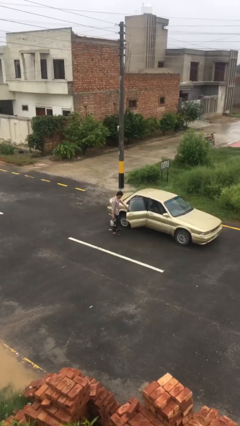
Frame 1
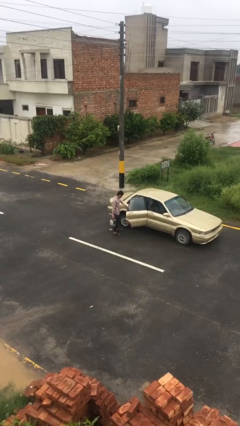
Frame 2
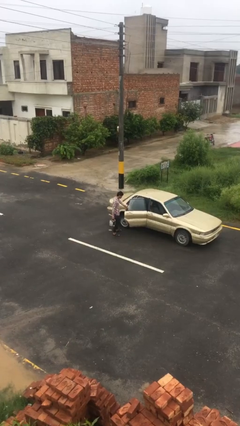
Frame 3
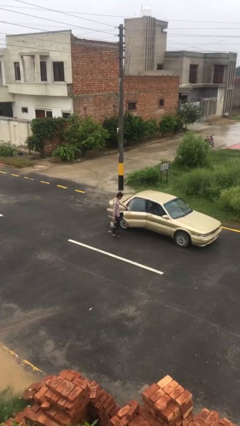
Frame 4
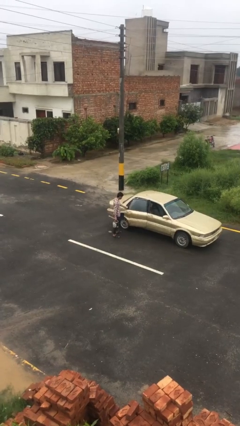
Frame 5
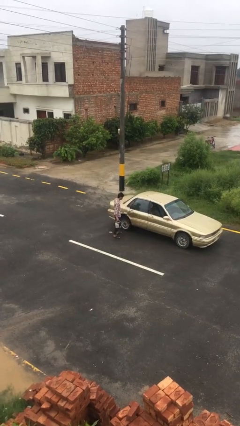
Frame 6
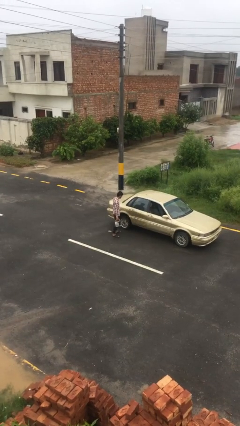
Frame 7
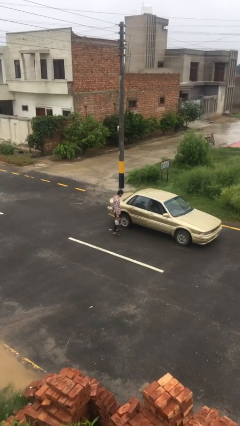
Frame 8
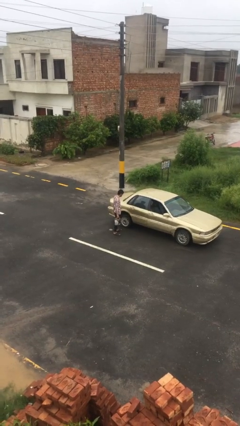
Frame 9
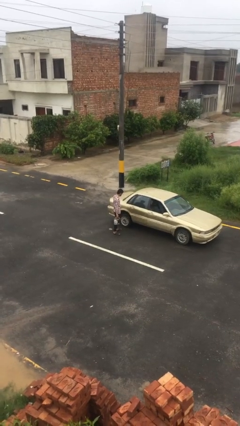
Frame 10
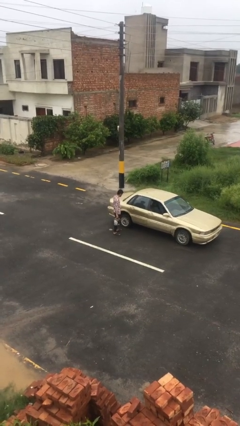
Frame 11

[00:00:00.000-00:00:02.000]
person closes car door

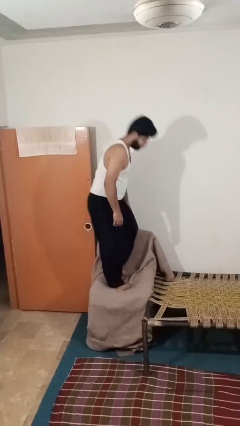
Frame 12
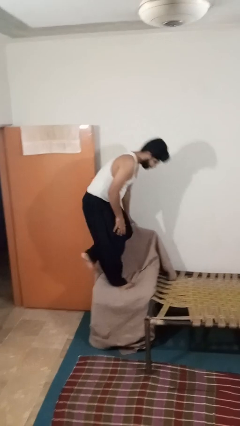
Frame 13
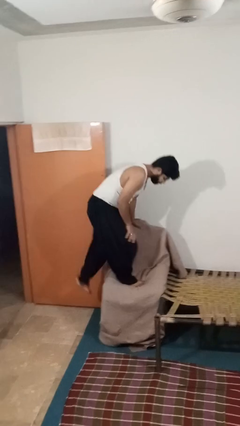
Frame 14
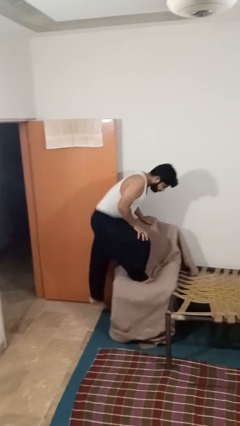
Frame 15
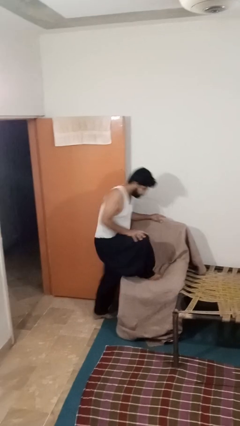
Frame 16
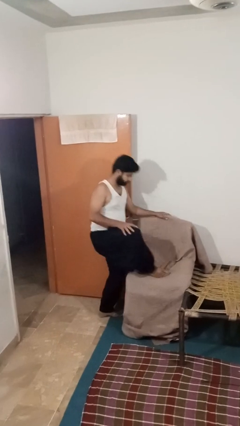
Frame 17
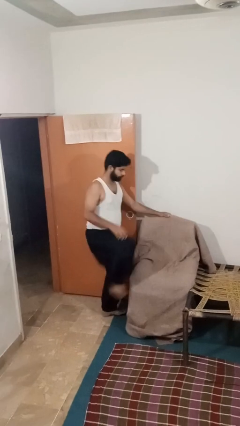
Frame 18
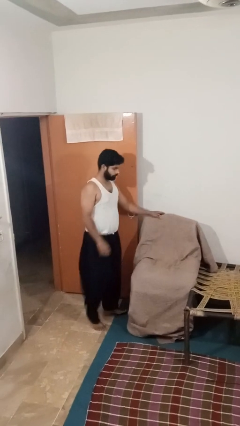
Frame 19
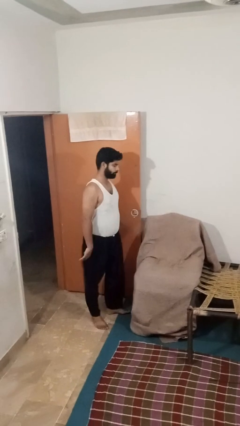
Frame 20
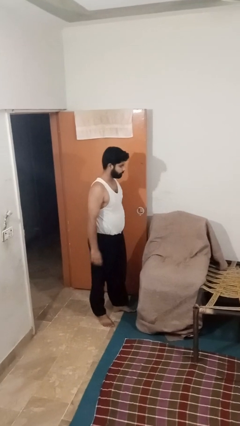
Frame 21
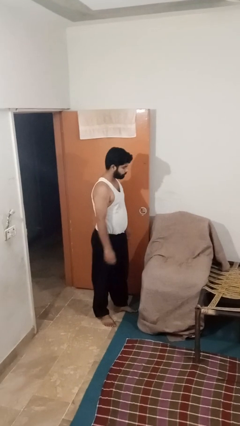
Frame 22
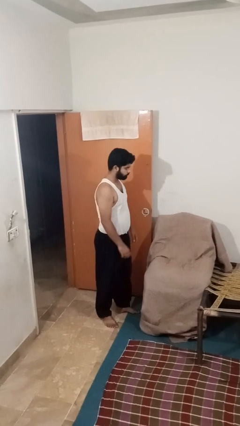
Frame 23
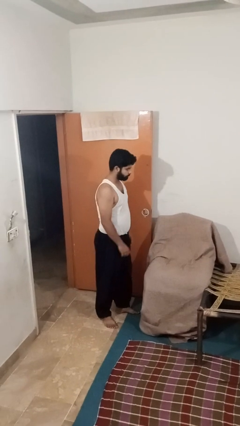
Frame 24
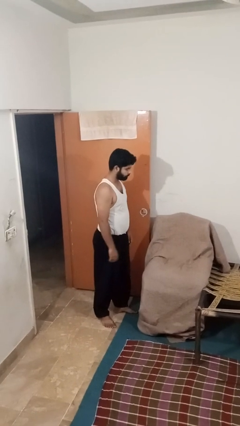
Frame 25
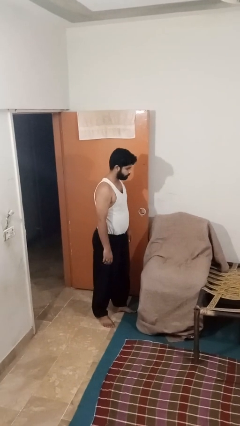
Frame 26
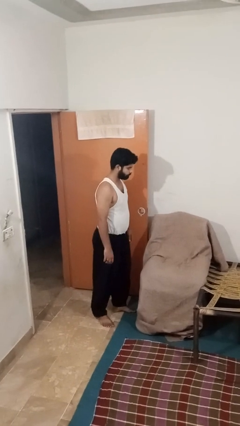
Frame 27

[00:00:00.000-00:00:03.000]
person climbs off couch

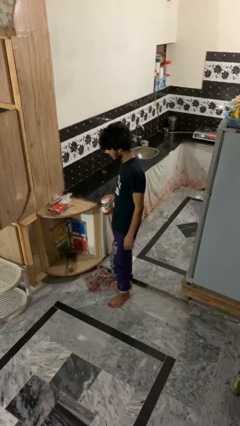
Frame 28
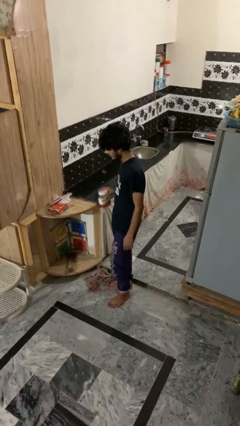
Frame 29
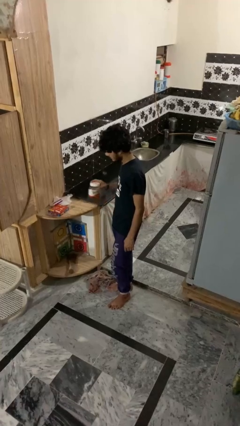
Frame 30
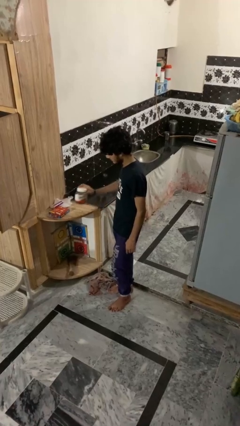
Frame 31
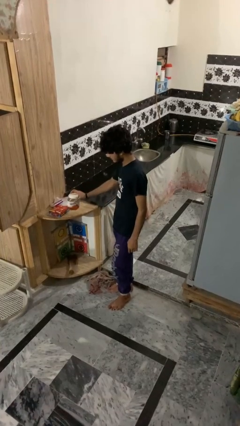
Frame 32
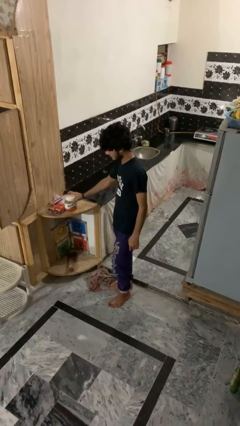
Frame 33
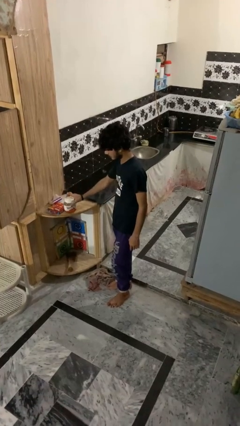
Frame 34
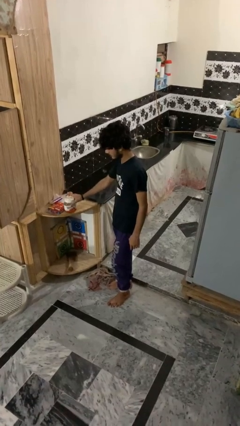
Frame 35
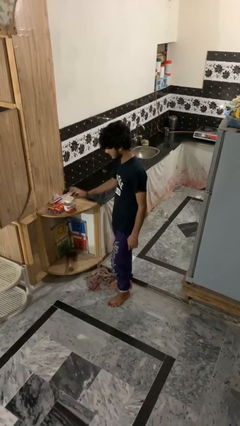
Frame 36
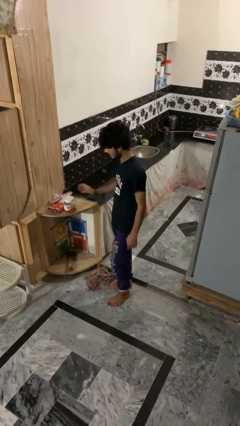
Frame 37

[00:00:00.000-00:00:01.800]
person puts down object on countertop

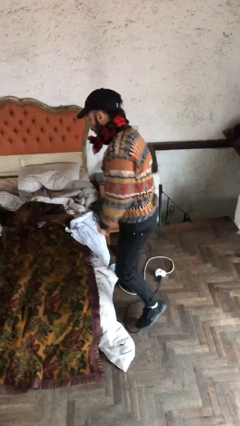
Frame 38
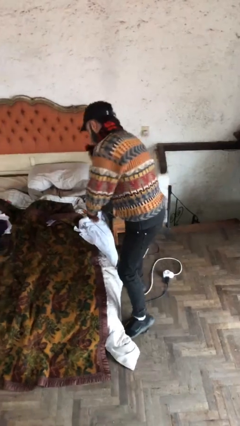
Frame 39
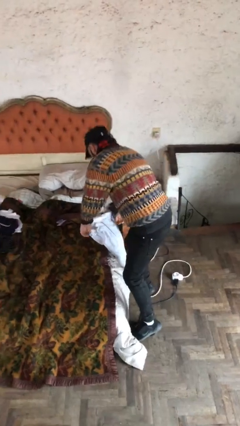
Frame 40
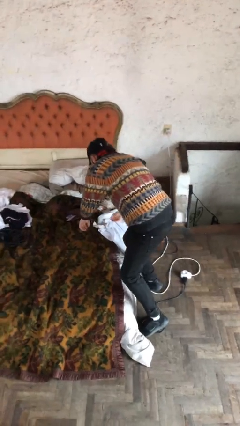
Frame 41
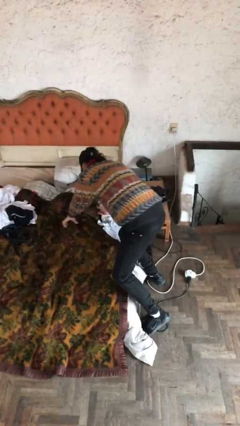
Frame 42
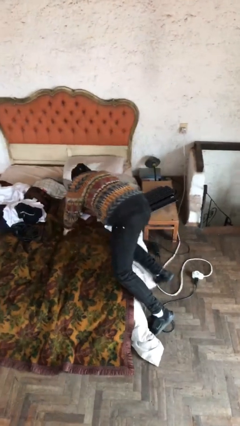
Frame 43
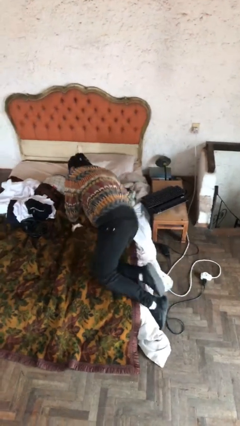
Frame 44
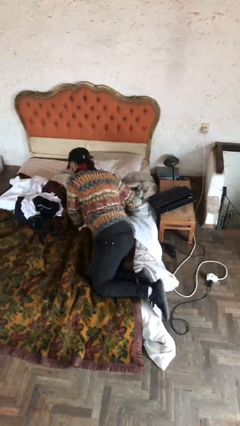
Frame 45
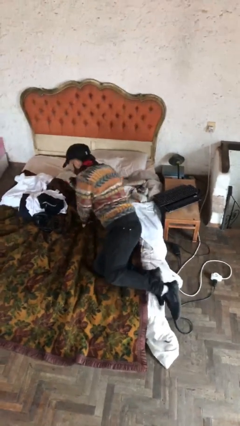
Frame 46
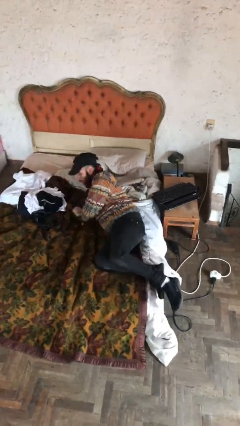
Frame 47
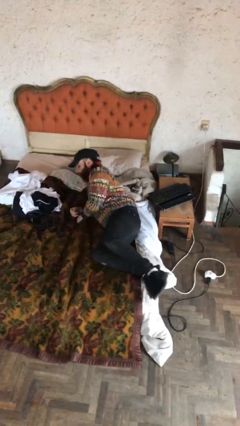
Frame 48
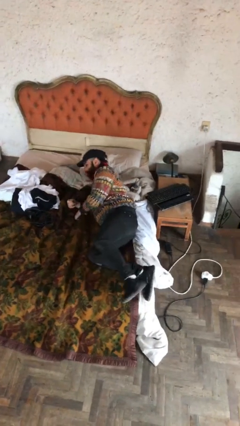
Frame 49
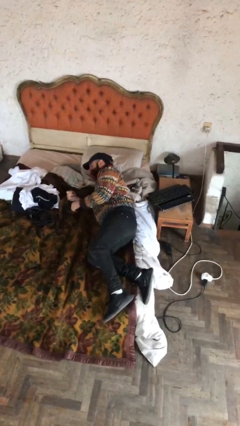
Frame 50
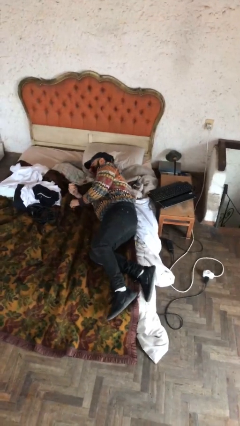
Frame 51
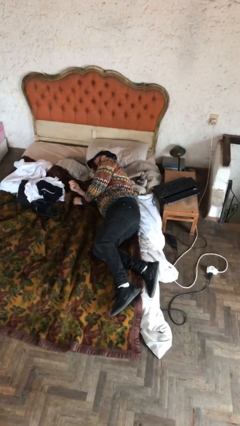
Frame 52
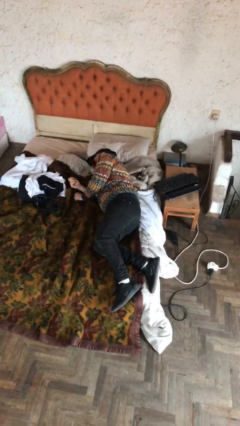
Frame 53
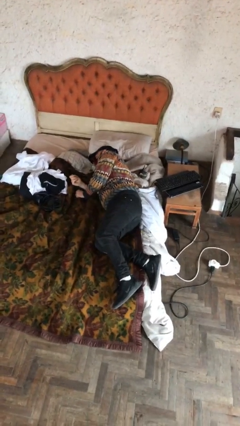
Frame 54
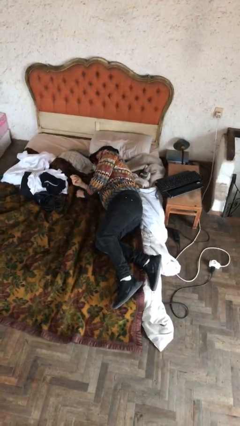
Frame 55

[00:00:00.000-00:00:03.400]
person lies down on bed

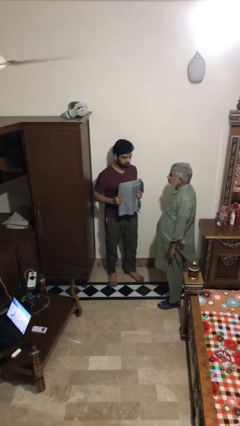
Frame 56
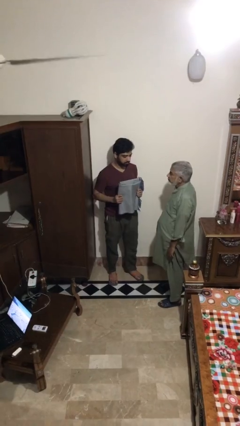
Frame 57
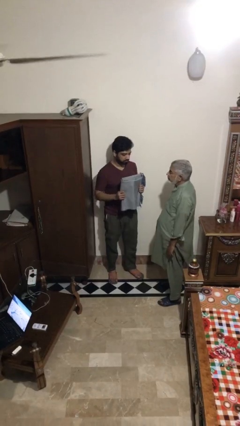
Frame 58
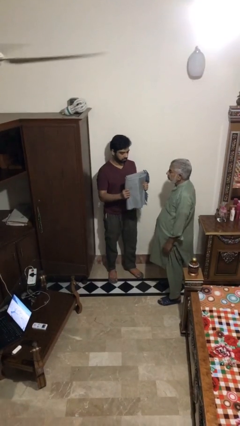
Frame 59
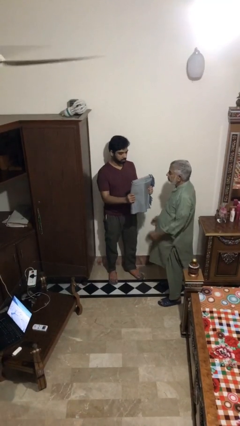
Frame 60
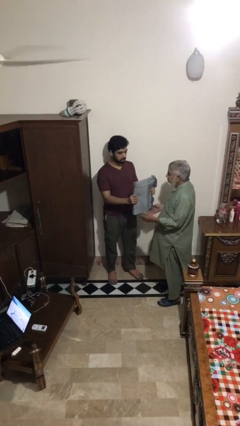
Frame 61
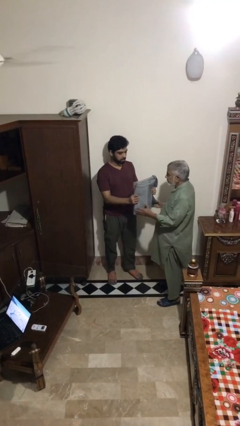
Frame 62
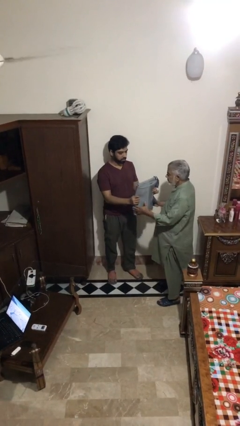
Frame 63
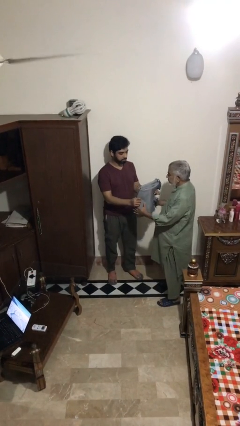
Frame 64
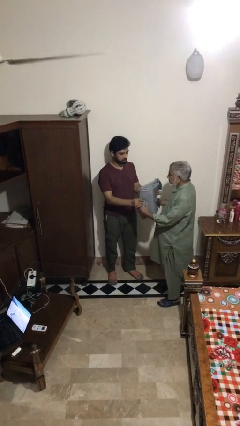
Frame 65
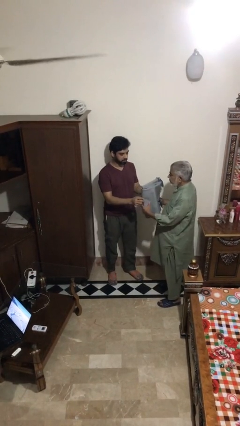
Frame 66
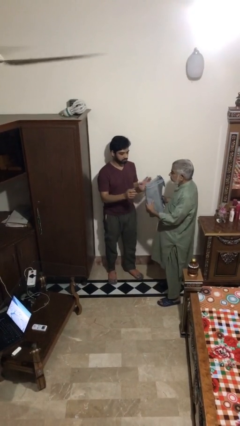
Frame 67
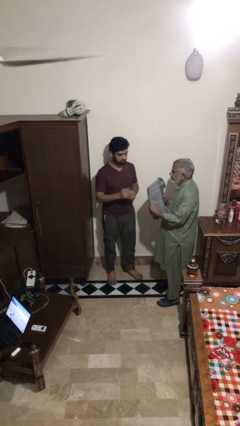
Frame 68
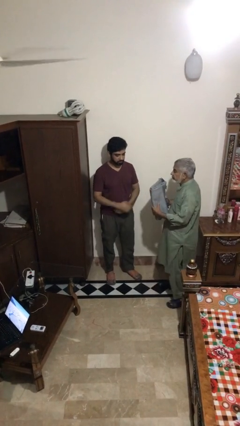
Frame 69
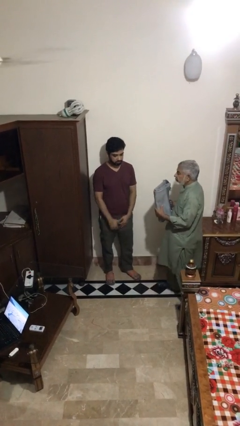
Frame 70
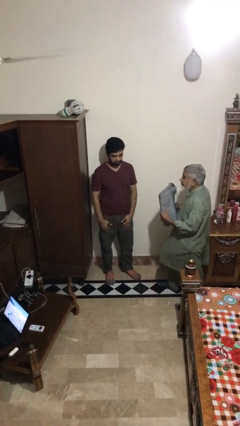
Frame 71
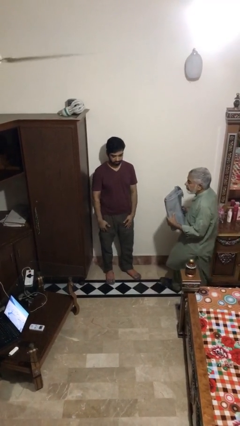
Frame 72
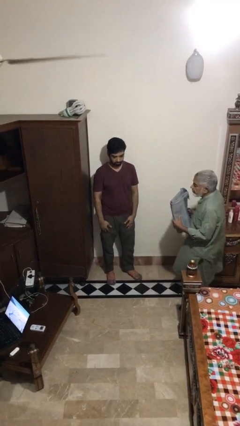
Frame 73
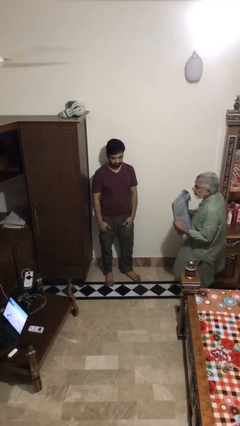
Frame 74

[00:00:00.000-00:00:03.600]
person transfers object to person

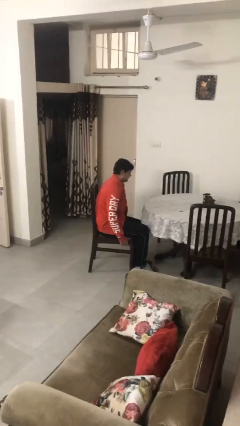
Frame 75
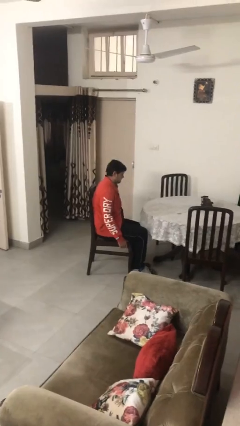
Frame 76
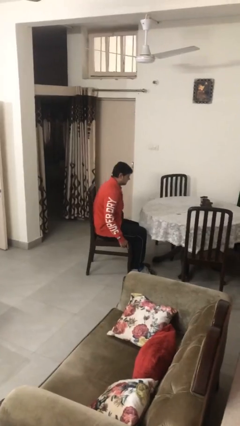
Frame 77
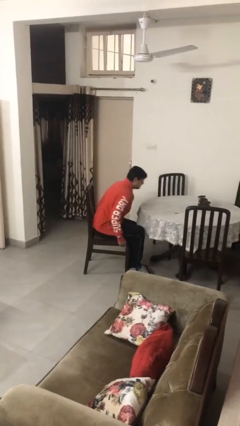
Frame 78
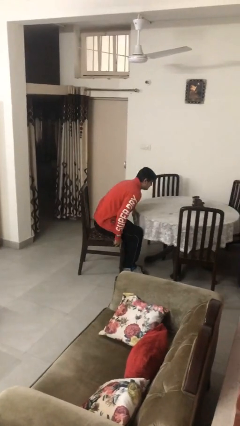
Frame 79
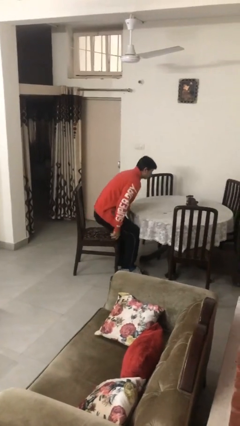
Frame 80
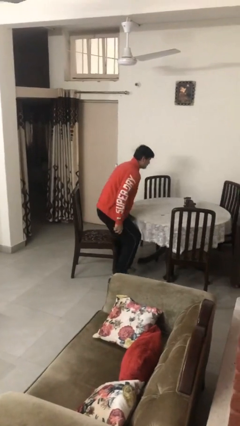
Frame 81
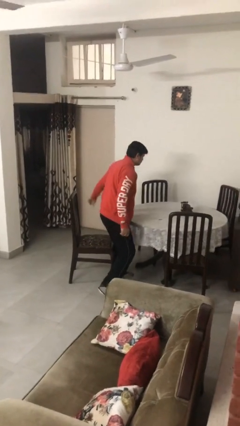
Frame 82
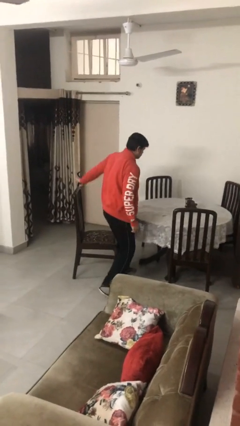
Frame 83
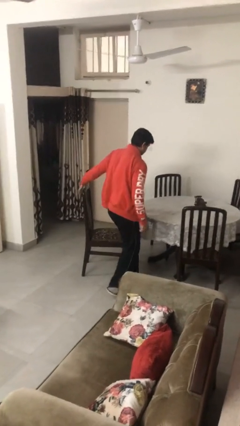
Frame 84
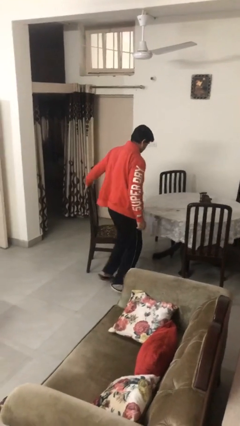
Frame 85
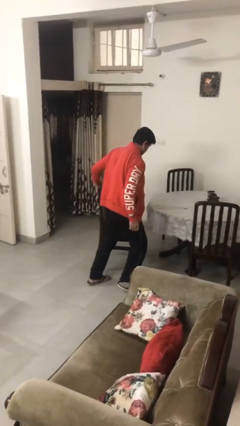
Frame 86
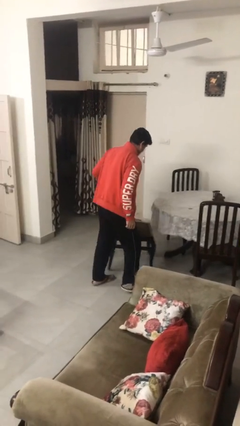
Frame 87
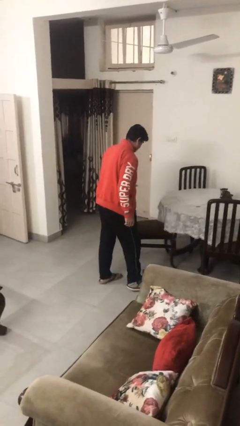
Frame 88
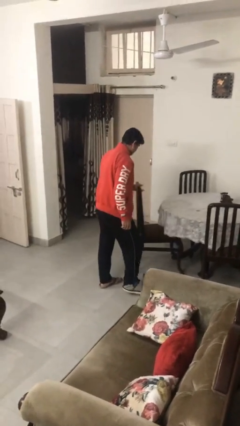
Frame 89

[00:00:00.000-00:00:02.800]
person stands up

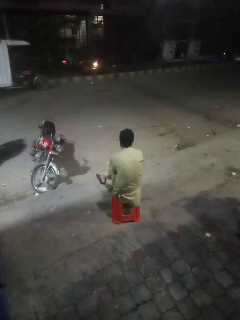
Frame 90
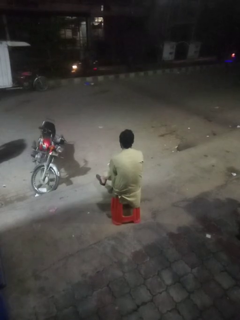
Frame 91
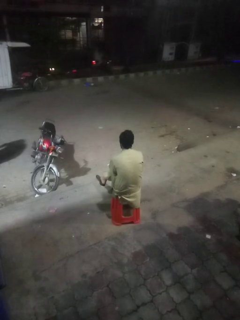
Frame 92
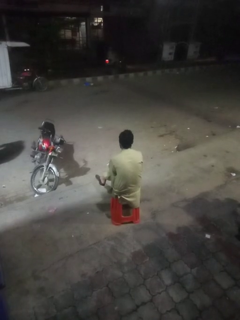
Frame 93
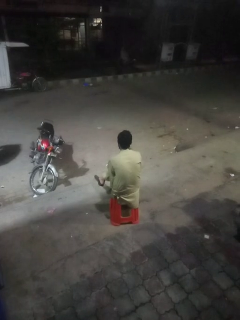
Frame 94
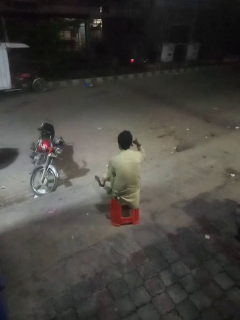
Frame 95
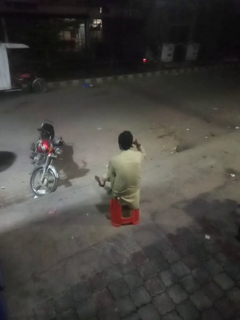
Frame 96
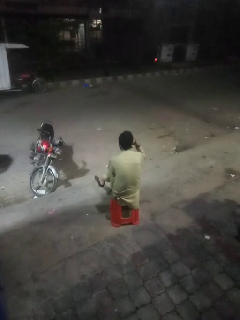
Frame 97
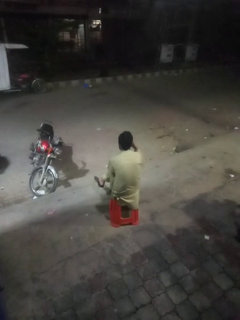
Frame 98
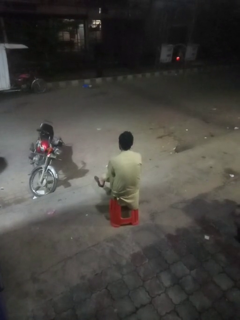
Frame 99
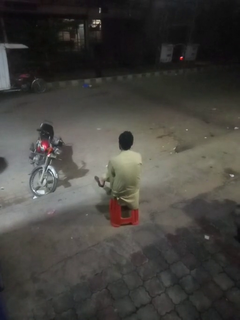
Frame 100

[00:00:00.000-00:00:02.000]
person gestures call me
